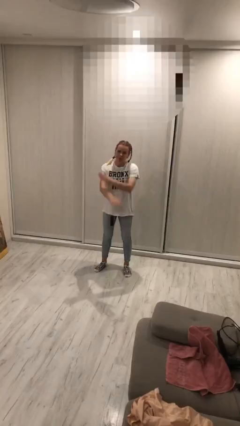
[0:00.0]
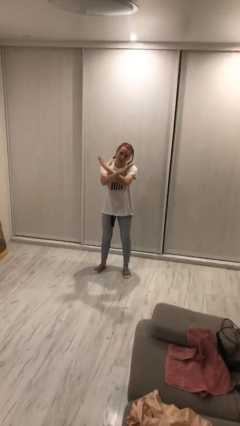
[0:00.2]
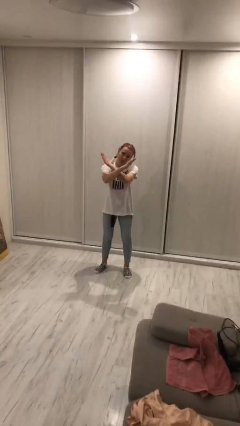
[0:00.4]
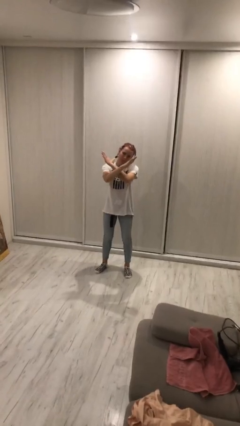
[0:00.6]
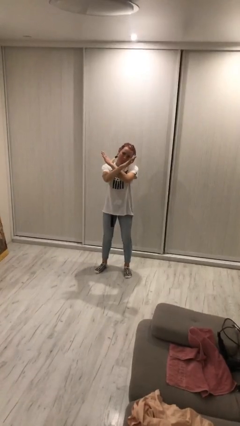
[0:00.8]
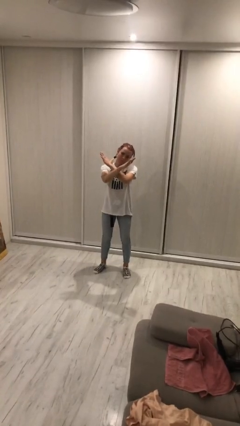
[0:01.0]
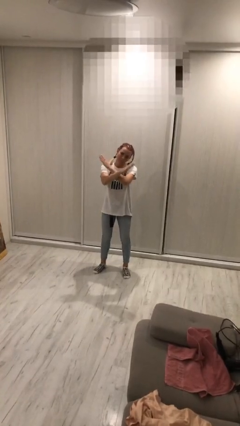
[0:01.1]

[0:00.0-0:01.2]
person gestures arms x

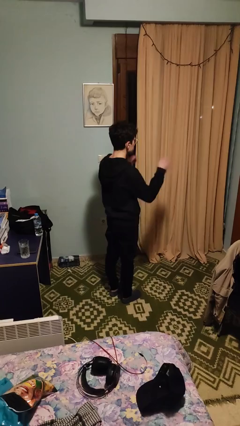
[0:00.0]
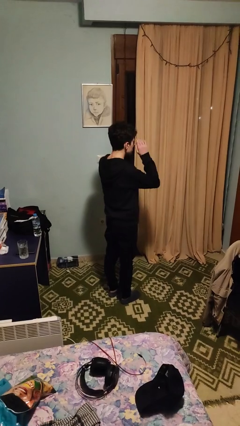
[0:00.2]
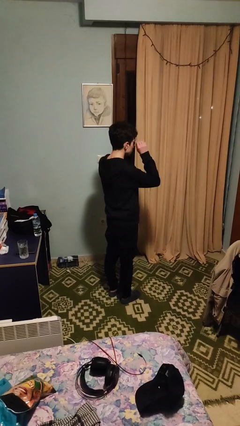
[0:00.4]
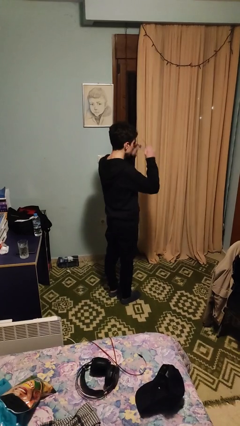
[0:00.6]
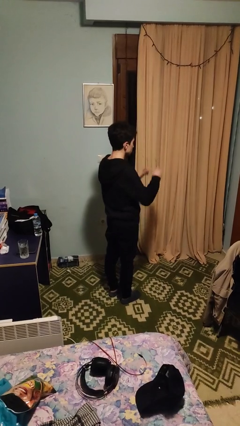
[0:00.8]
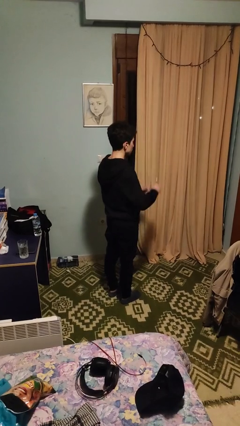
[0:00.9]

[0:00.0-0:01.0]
person takes off glasses

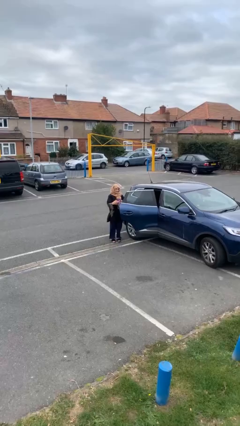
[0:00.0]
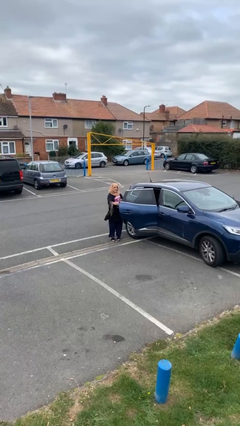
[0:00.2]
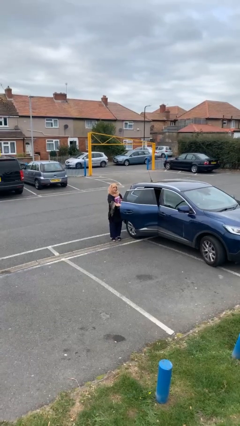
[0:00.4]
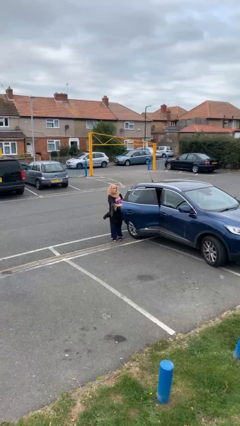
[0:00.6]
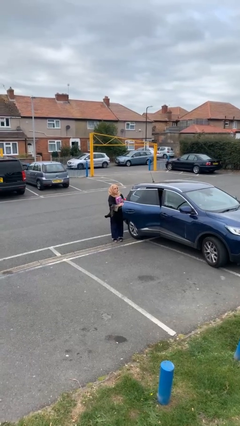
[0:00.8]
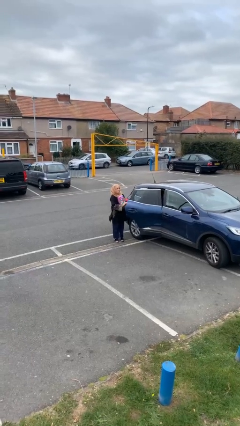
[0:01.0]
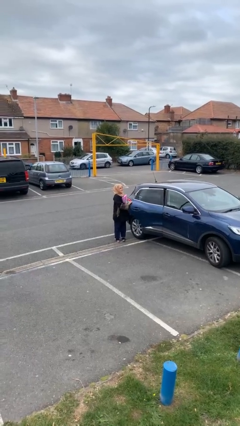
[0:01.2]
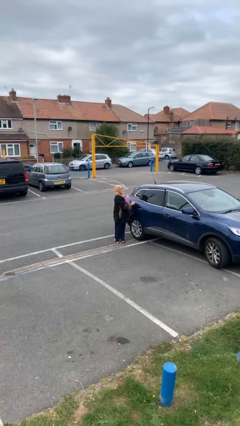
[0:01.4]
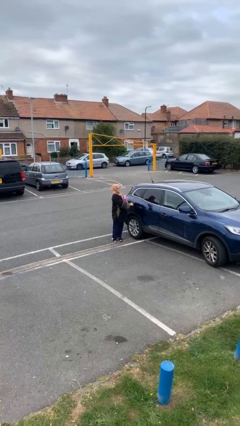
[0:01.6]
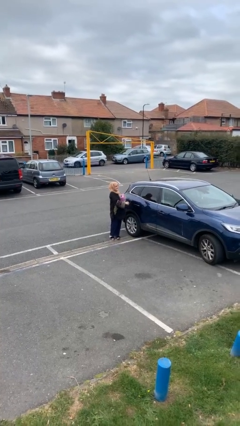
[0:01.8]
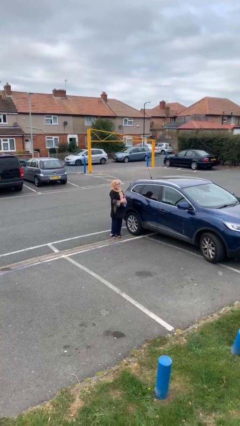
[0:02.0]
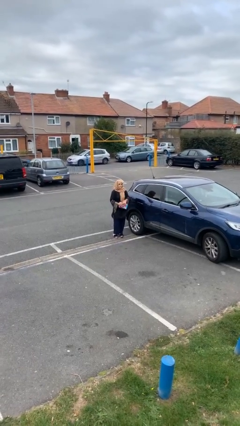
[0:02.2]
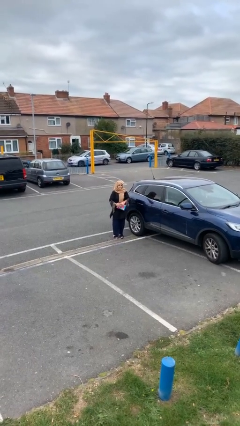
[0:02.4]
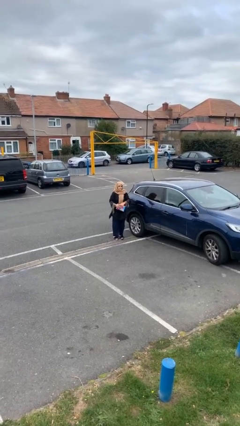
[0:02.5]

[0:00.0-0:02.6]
person closes car door

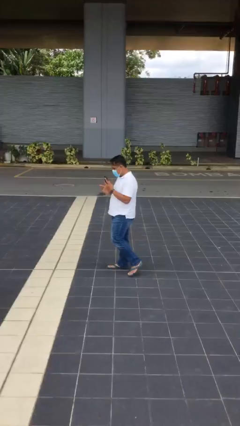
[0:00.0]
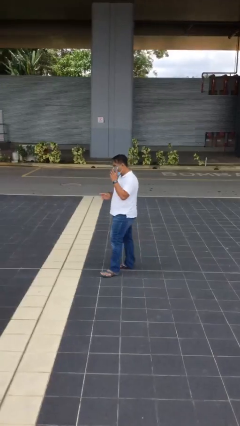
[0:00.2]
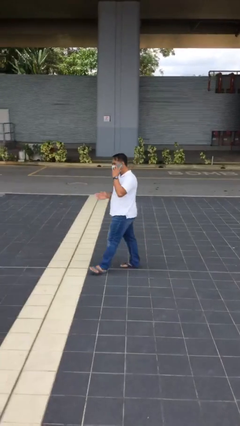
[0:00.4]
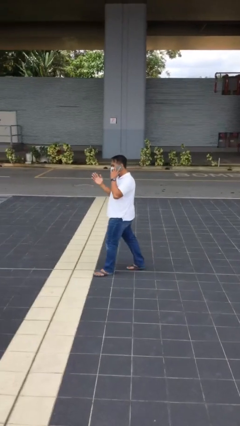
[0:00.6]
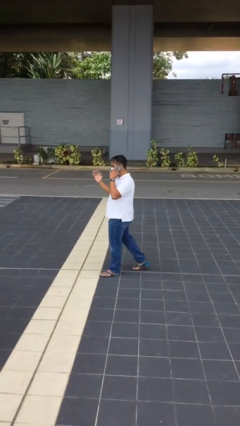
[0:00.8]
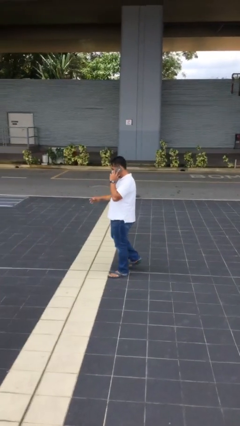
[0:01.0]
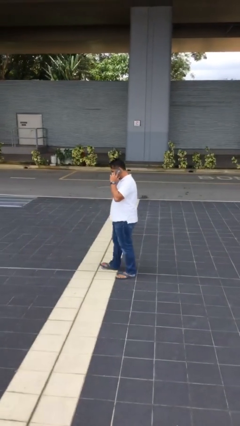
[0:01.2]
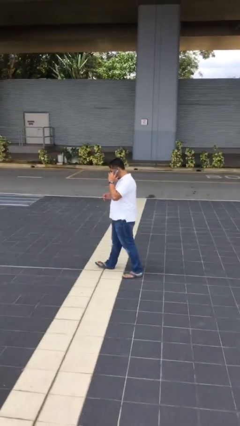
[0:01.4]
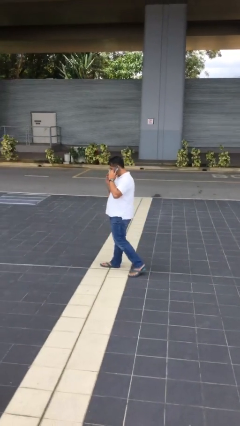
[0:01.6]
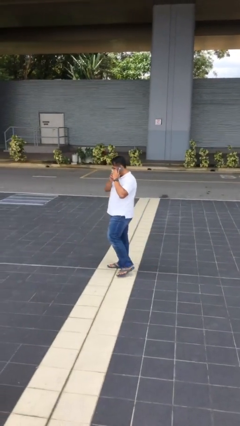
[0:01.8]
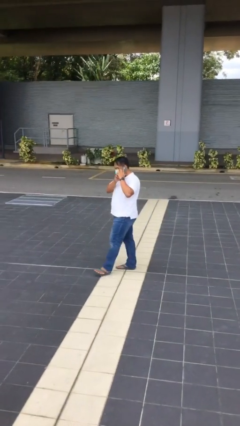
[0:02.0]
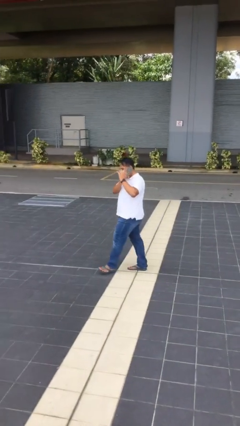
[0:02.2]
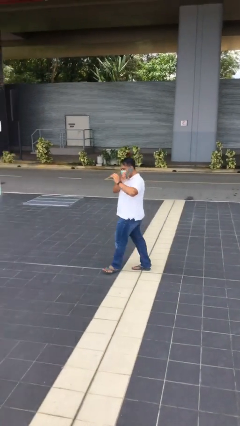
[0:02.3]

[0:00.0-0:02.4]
person talks on phone

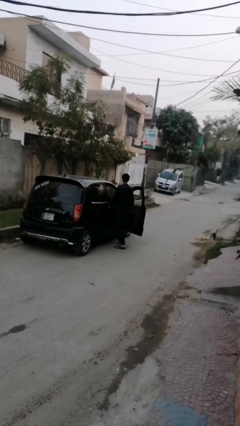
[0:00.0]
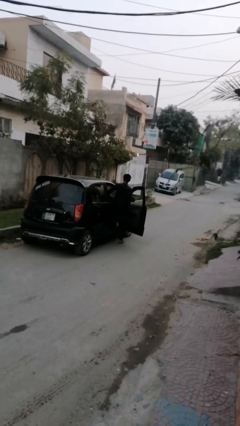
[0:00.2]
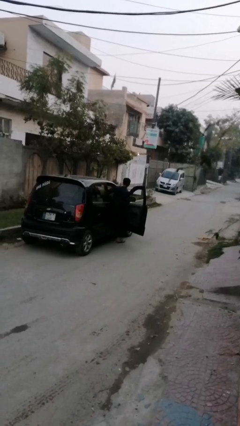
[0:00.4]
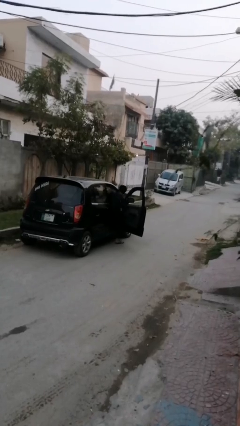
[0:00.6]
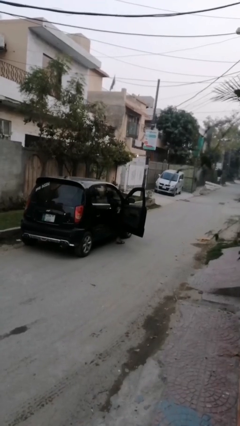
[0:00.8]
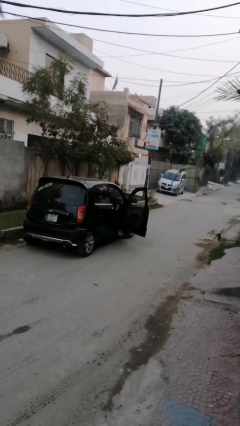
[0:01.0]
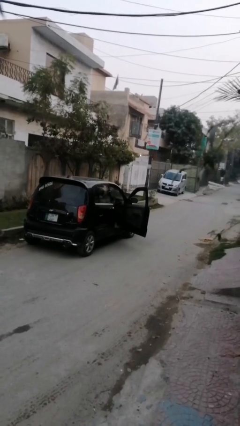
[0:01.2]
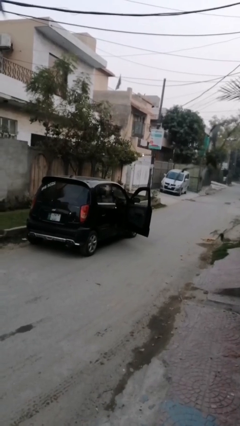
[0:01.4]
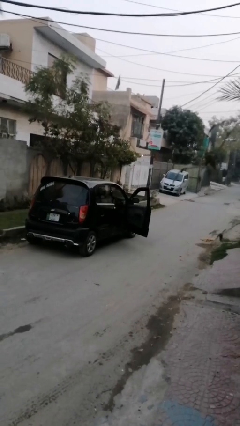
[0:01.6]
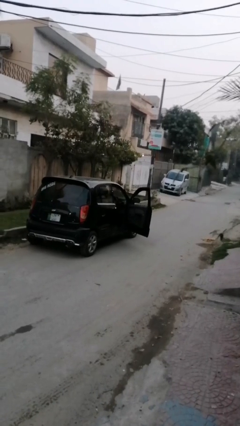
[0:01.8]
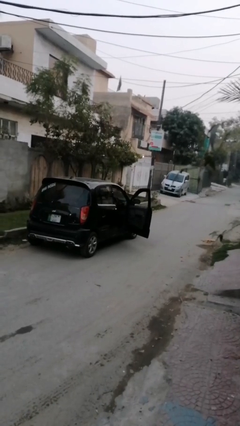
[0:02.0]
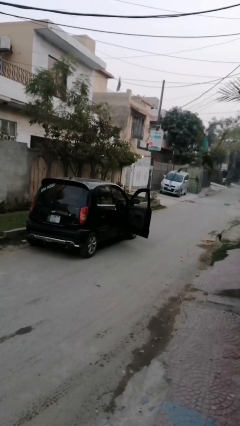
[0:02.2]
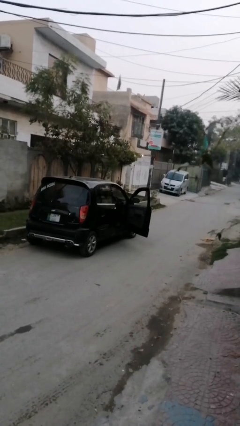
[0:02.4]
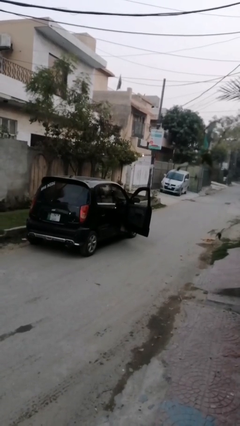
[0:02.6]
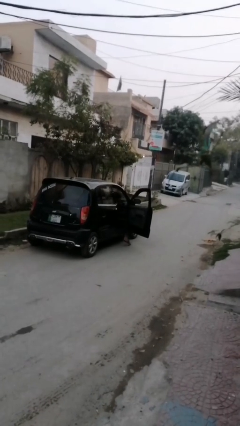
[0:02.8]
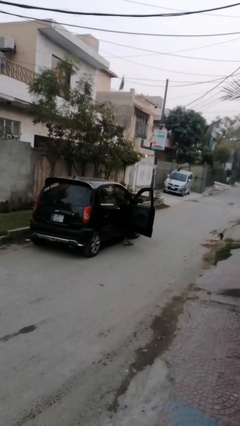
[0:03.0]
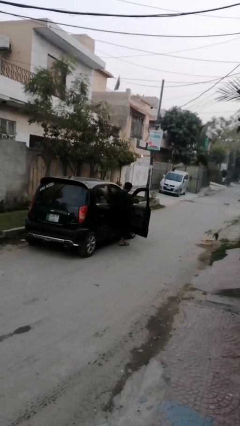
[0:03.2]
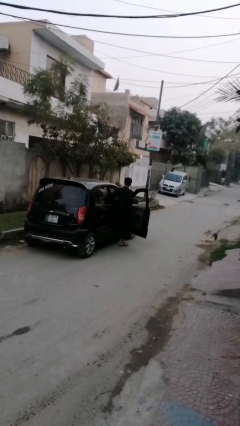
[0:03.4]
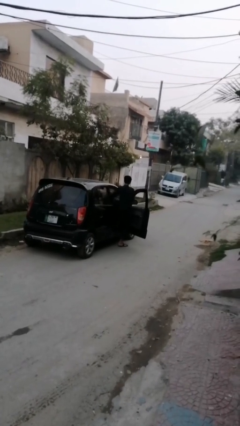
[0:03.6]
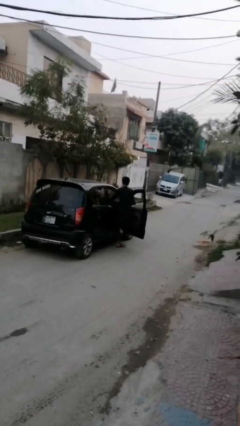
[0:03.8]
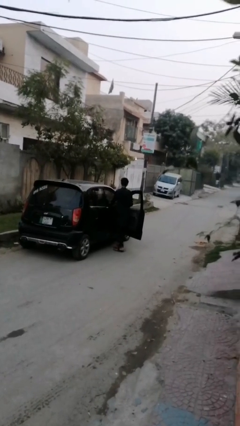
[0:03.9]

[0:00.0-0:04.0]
person enters car

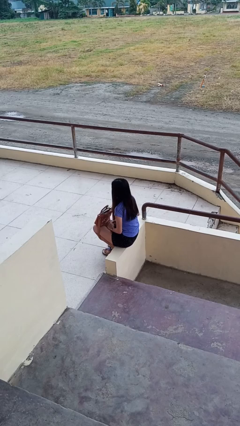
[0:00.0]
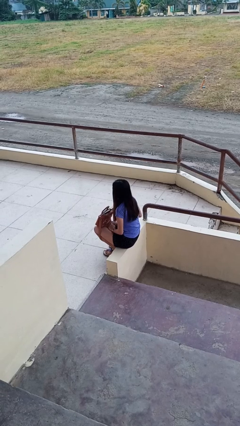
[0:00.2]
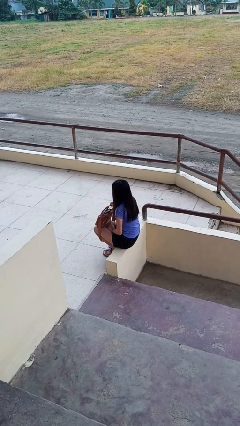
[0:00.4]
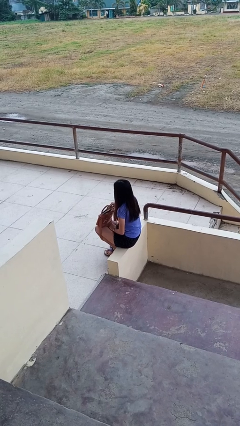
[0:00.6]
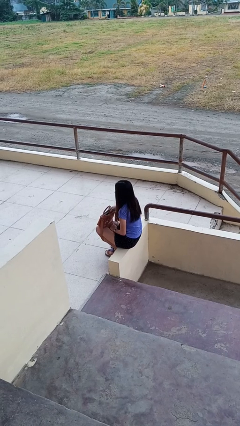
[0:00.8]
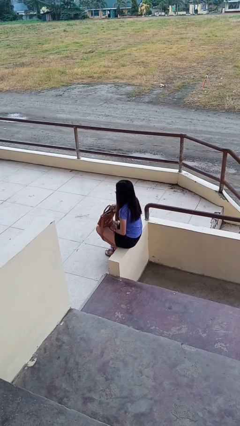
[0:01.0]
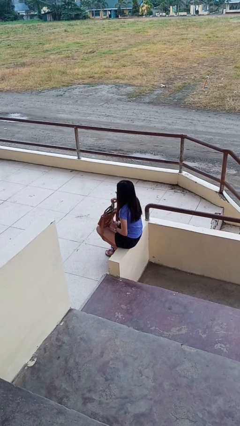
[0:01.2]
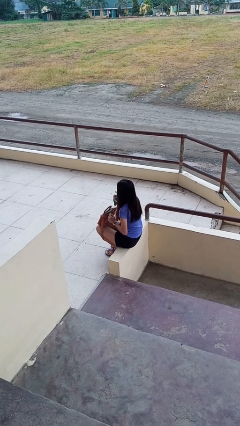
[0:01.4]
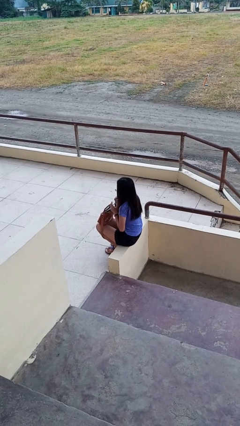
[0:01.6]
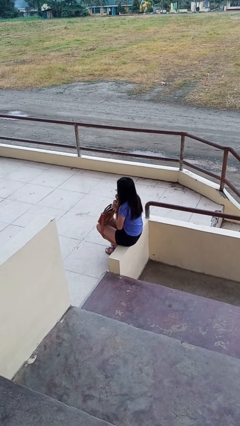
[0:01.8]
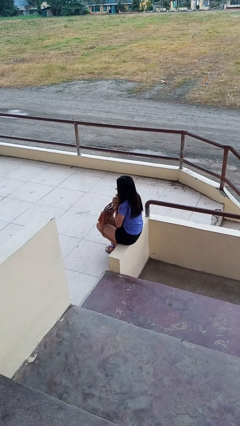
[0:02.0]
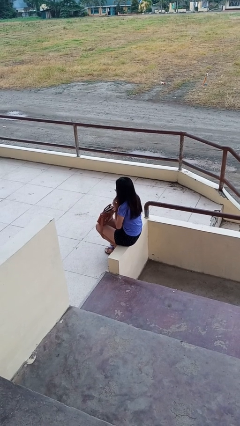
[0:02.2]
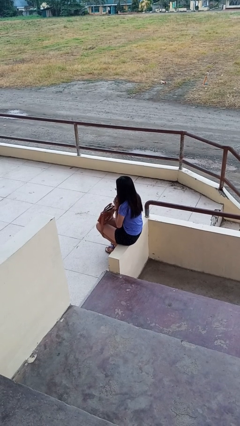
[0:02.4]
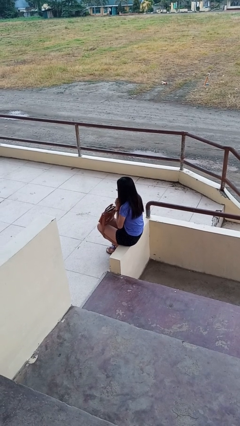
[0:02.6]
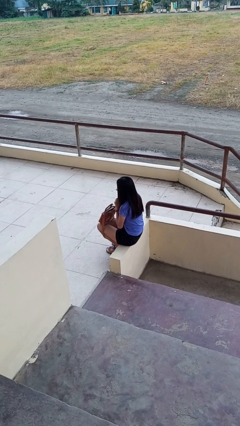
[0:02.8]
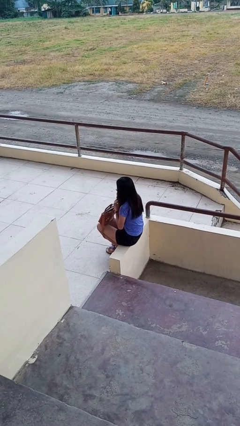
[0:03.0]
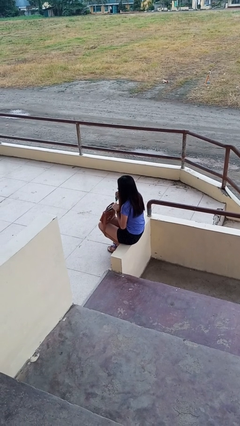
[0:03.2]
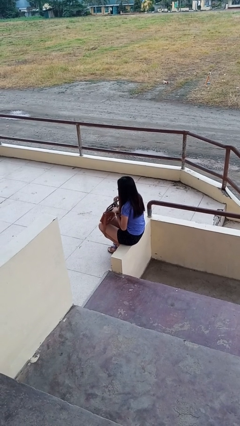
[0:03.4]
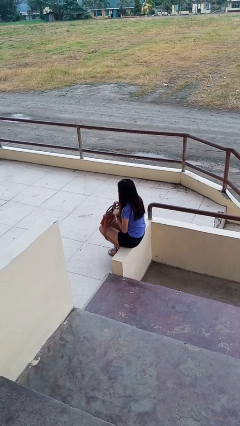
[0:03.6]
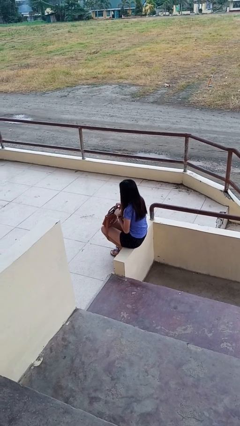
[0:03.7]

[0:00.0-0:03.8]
person eats snack from bag

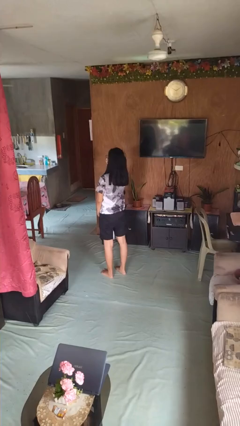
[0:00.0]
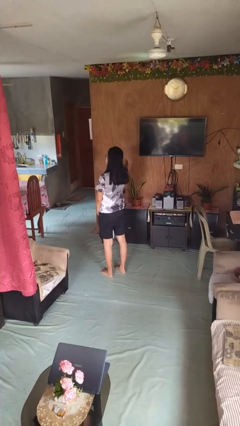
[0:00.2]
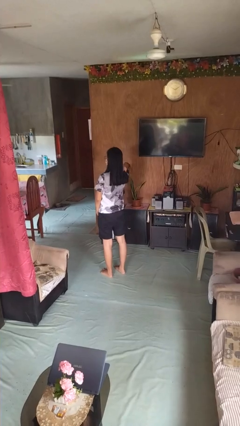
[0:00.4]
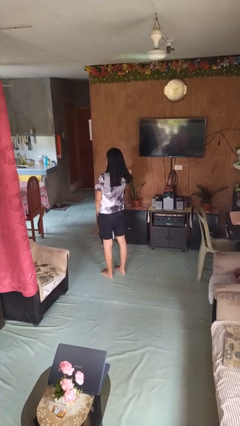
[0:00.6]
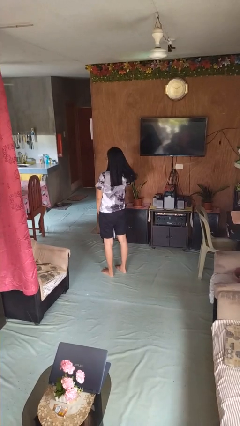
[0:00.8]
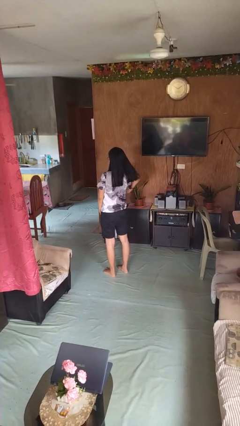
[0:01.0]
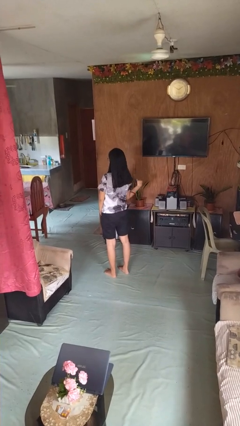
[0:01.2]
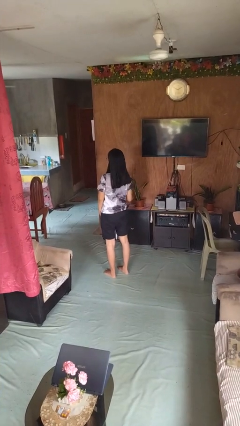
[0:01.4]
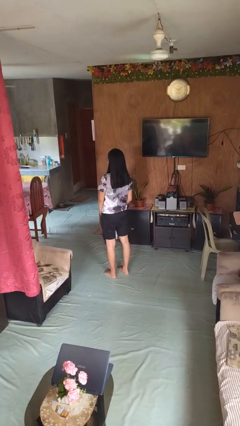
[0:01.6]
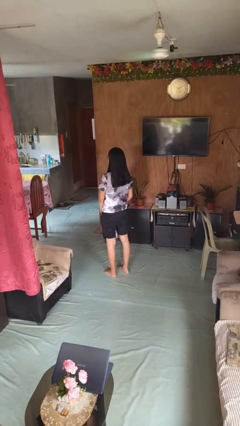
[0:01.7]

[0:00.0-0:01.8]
person strokes hair

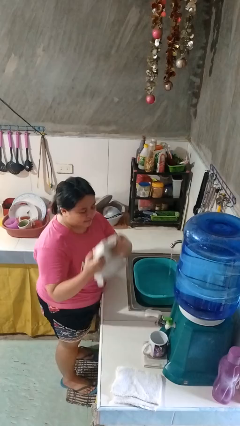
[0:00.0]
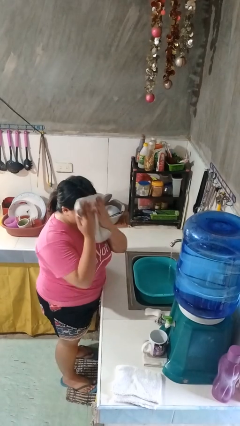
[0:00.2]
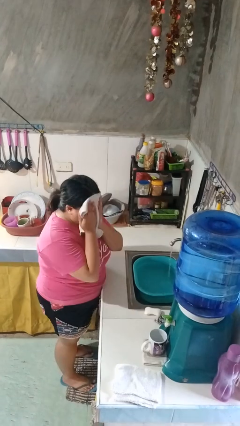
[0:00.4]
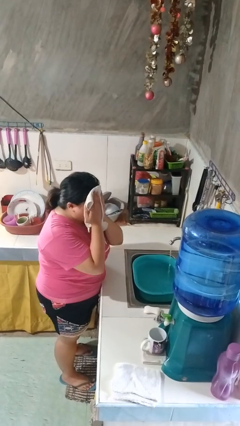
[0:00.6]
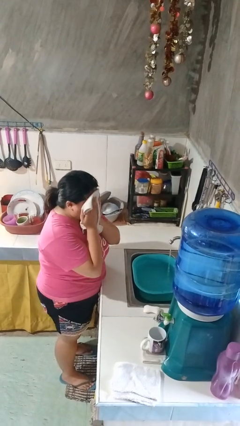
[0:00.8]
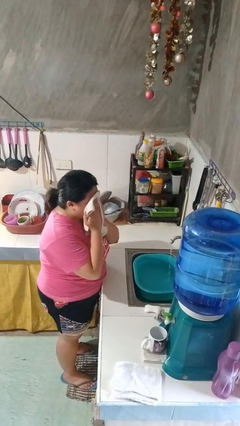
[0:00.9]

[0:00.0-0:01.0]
person dries face with towel
